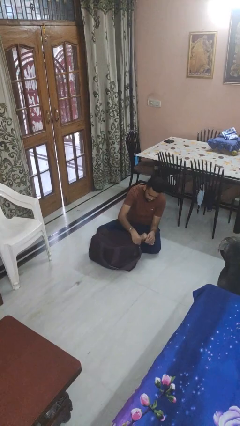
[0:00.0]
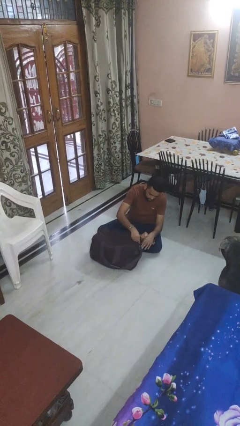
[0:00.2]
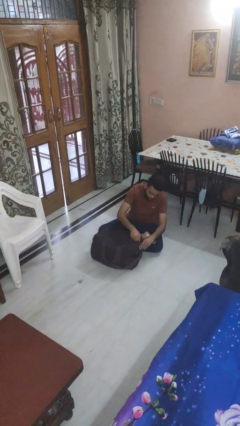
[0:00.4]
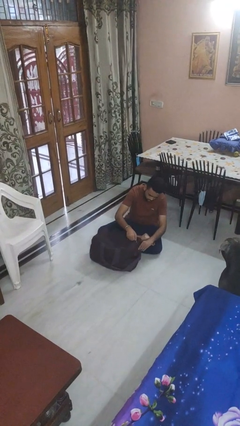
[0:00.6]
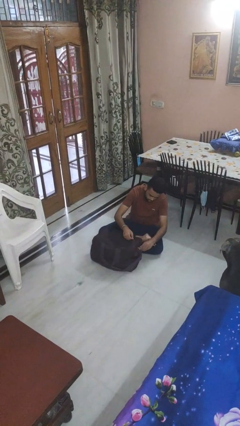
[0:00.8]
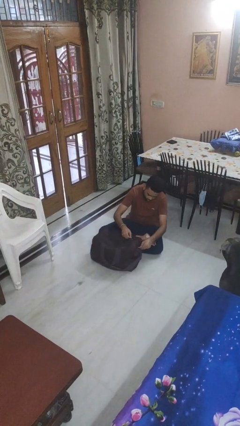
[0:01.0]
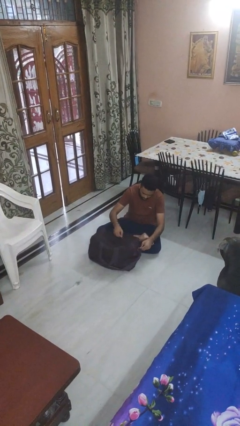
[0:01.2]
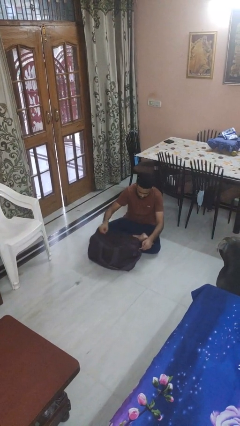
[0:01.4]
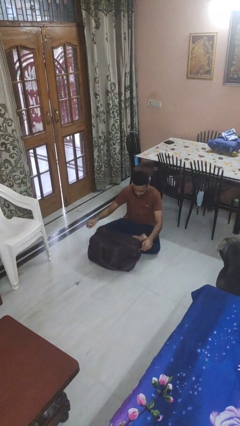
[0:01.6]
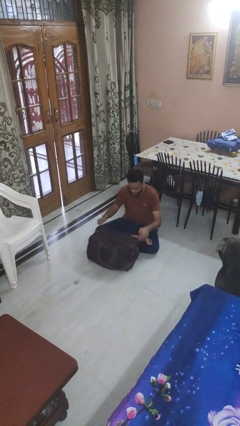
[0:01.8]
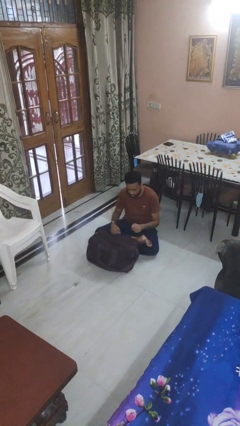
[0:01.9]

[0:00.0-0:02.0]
person opens suitcase

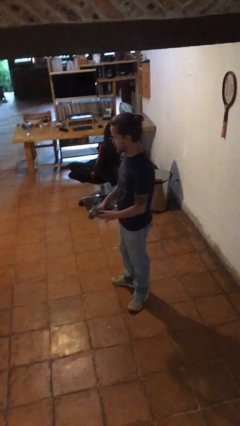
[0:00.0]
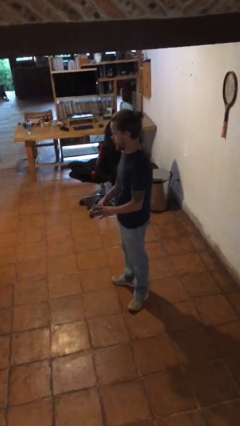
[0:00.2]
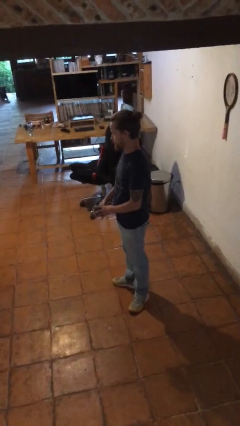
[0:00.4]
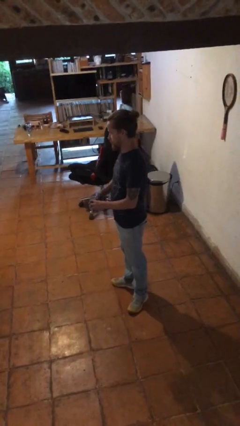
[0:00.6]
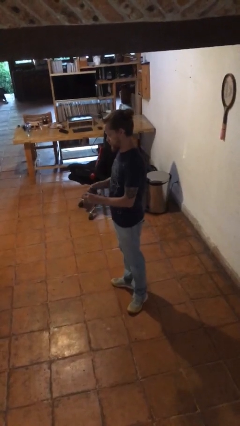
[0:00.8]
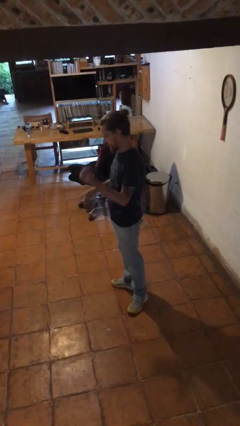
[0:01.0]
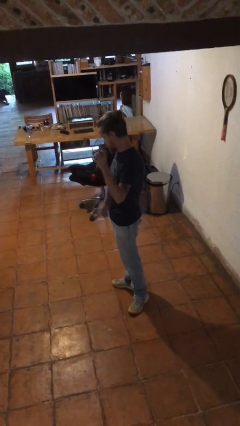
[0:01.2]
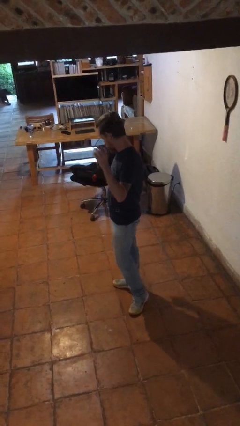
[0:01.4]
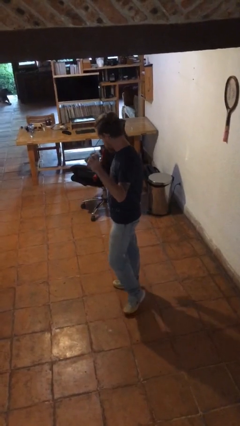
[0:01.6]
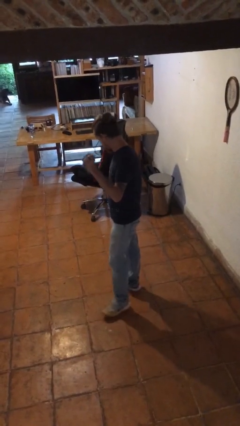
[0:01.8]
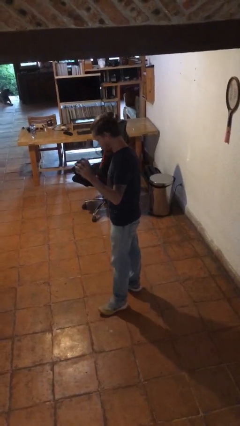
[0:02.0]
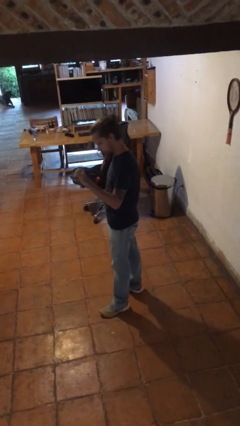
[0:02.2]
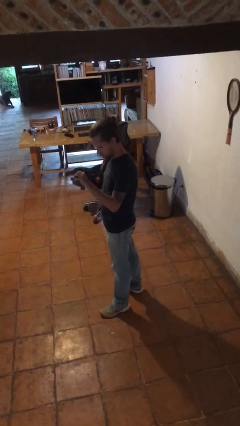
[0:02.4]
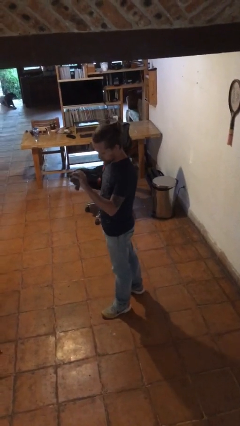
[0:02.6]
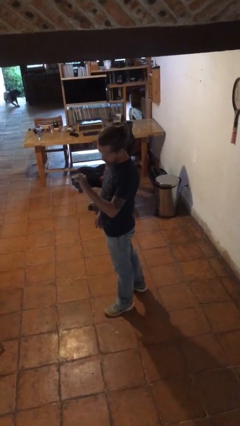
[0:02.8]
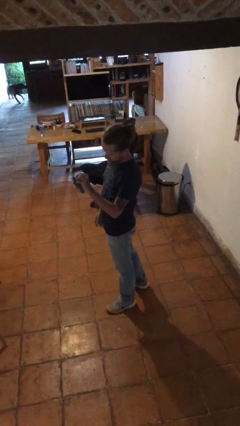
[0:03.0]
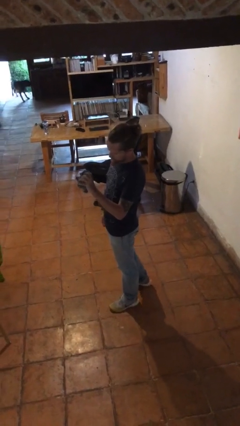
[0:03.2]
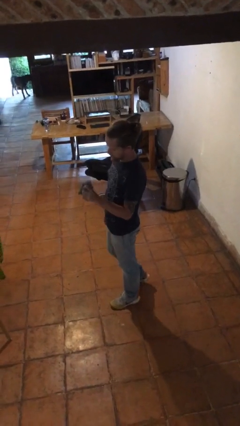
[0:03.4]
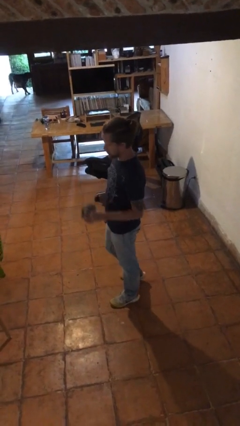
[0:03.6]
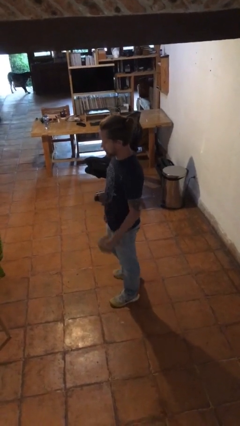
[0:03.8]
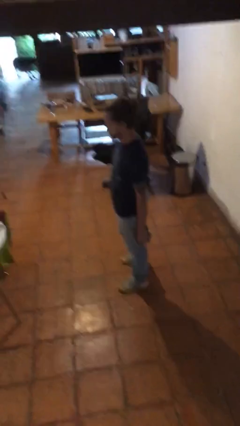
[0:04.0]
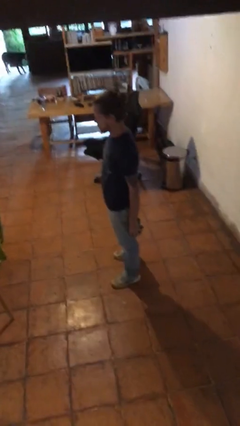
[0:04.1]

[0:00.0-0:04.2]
person squeezes object

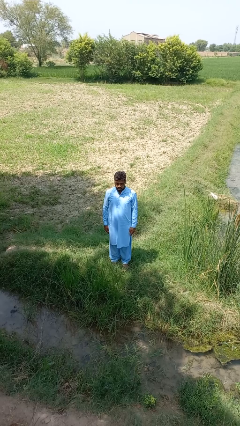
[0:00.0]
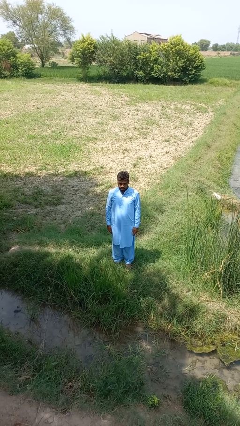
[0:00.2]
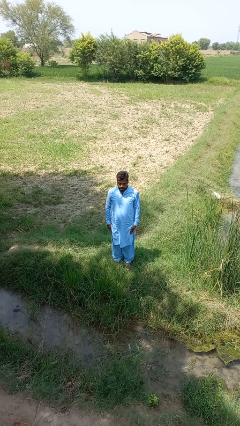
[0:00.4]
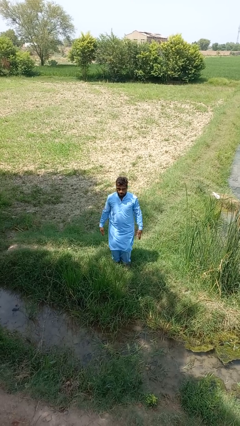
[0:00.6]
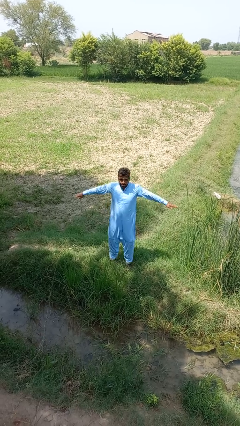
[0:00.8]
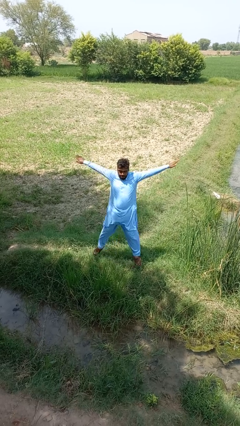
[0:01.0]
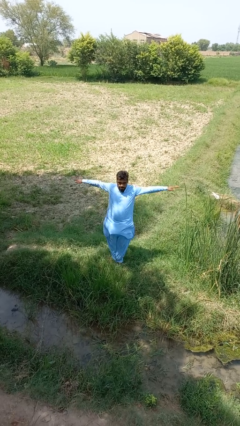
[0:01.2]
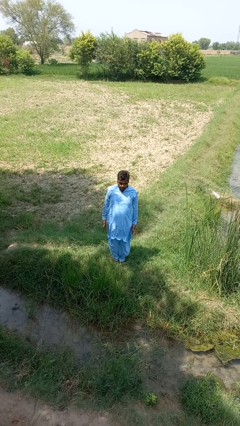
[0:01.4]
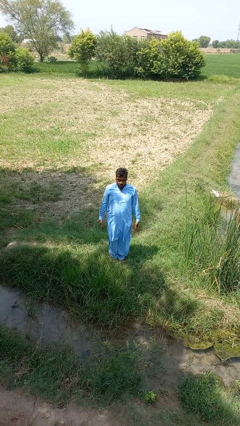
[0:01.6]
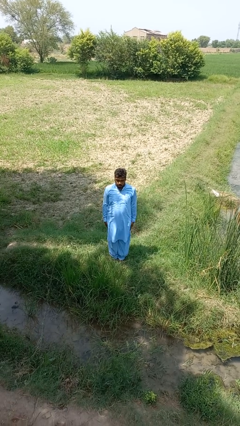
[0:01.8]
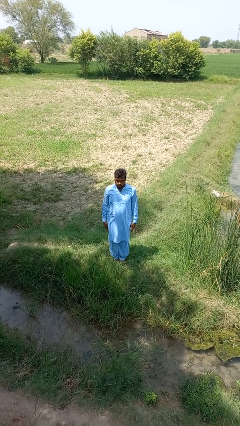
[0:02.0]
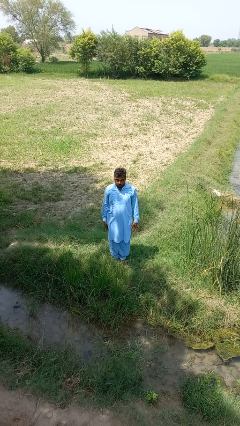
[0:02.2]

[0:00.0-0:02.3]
person exercises with jumping jacks

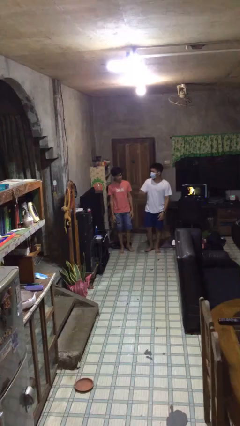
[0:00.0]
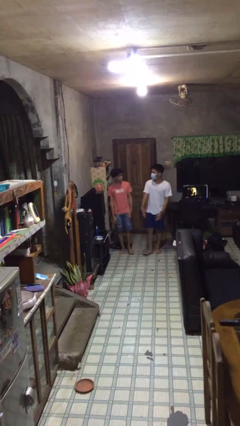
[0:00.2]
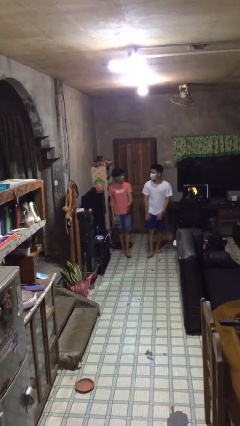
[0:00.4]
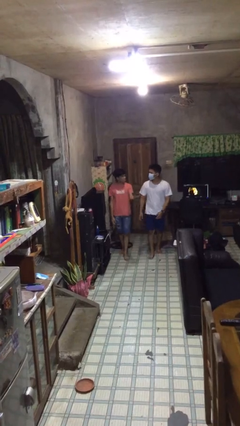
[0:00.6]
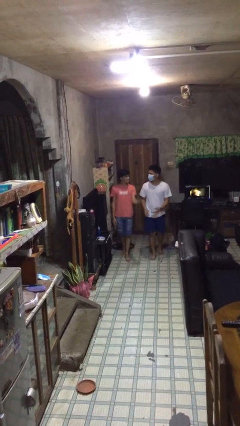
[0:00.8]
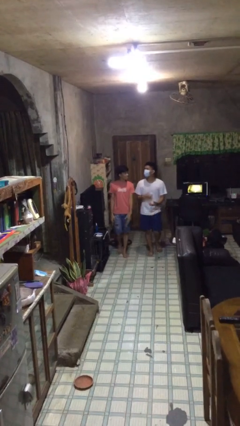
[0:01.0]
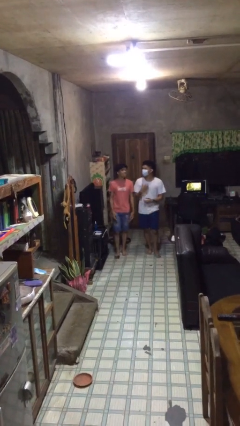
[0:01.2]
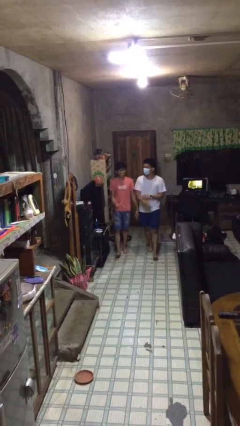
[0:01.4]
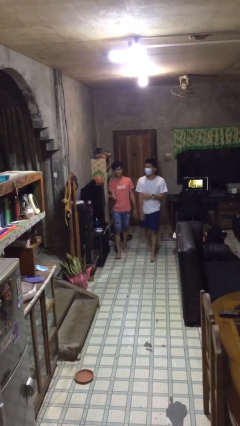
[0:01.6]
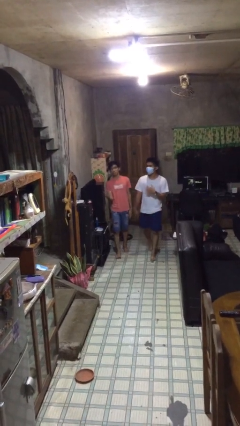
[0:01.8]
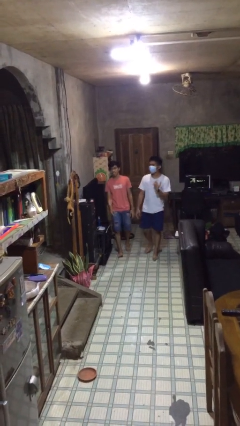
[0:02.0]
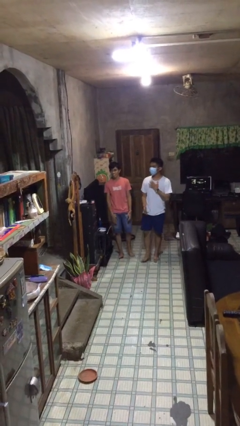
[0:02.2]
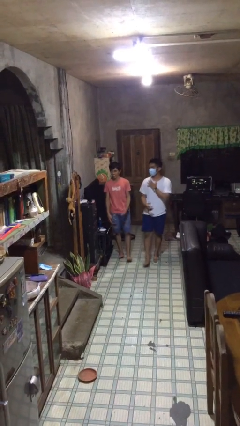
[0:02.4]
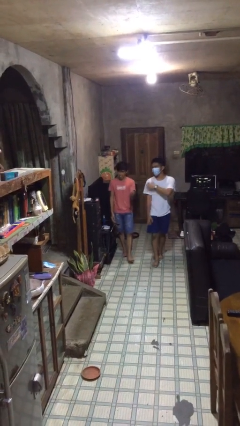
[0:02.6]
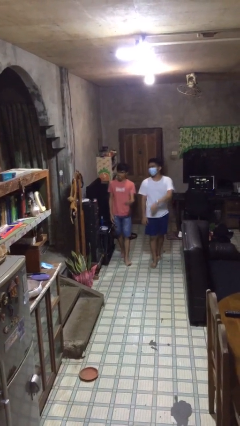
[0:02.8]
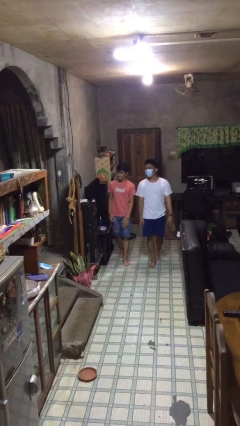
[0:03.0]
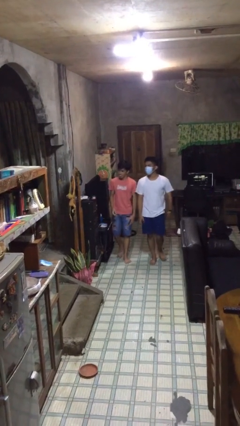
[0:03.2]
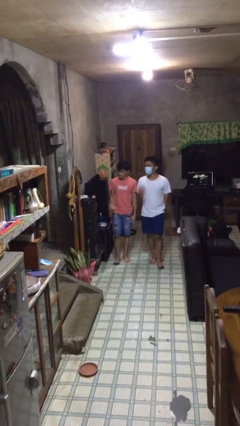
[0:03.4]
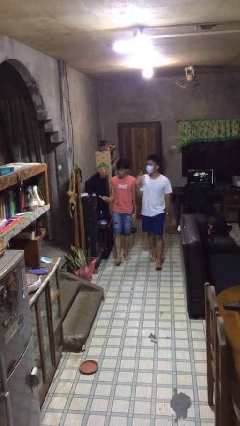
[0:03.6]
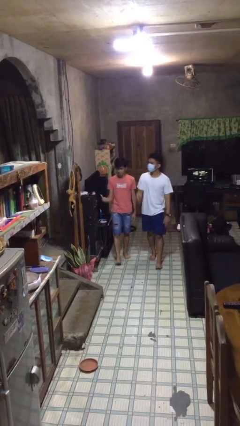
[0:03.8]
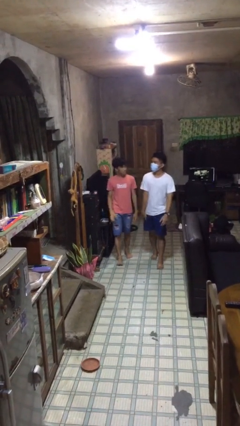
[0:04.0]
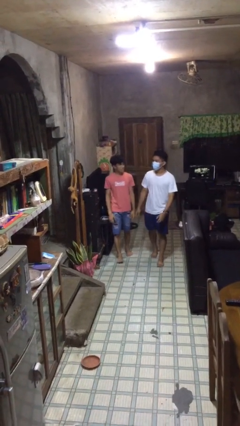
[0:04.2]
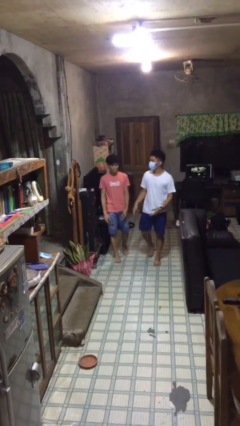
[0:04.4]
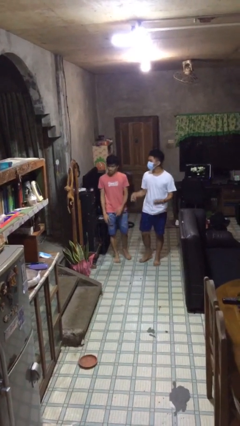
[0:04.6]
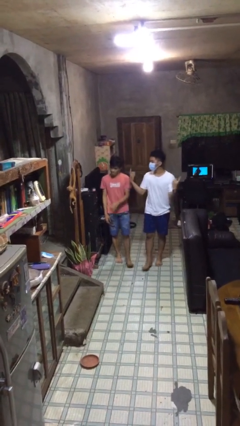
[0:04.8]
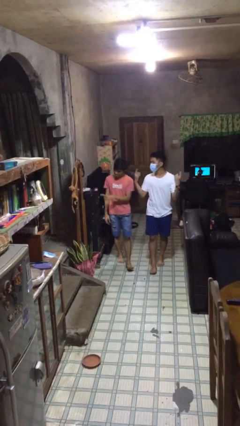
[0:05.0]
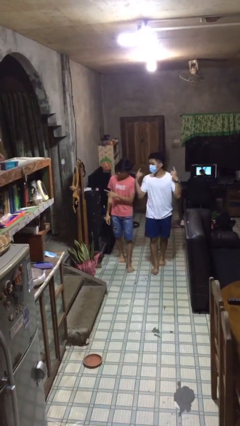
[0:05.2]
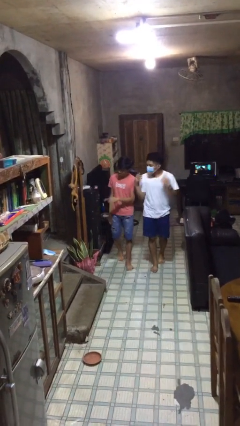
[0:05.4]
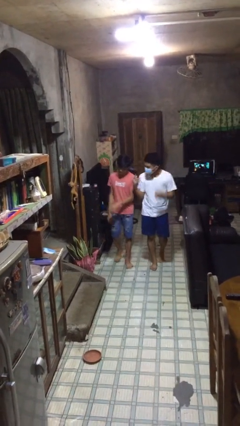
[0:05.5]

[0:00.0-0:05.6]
person talks to person

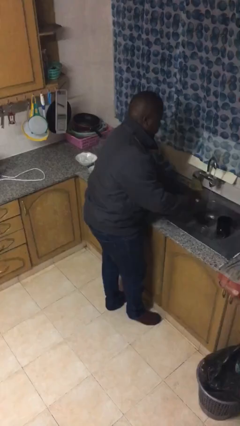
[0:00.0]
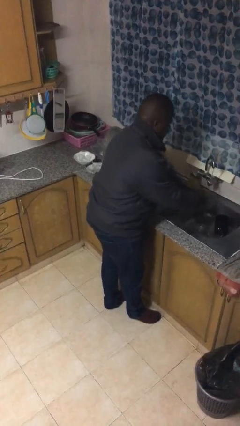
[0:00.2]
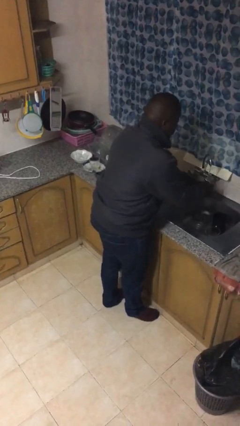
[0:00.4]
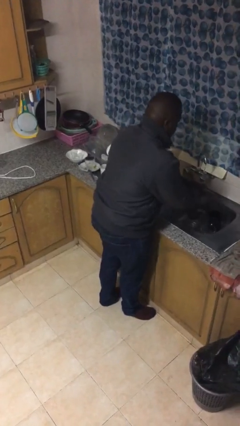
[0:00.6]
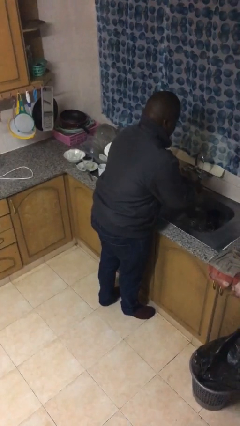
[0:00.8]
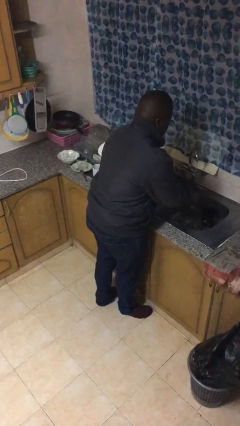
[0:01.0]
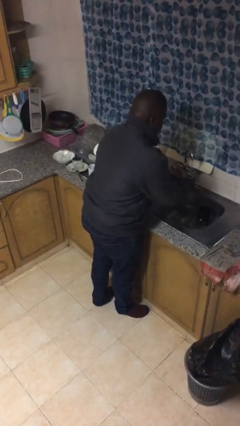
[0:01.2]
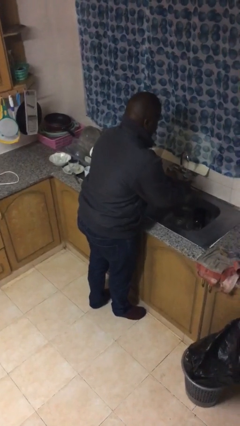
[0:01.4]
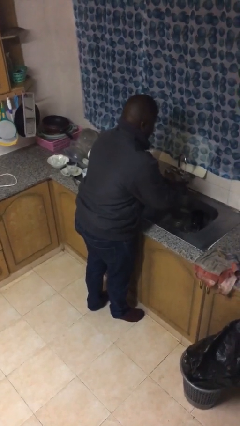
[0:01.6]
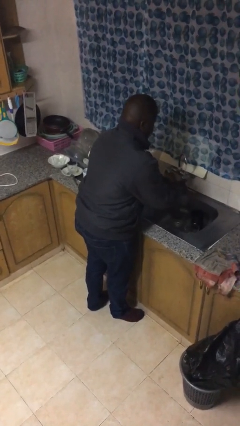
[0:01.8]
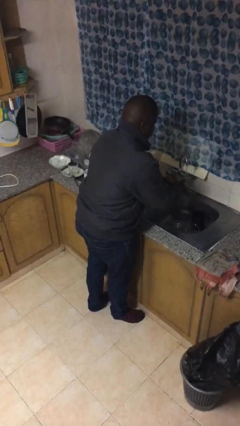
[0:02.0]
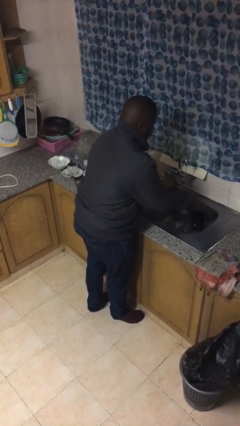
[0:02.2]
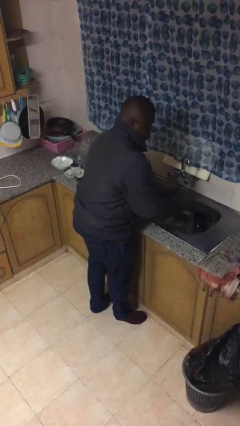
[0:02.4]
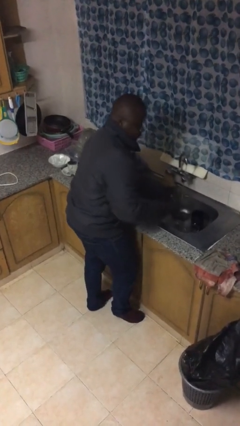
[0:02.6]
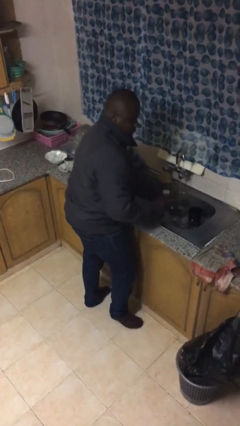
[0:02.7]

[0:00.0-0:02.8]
person washes hands

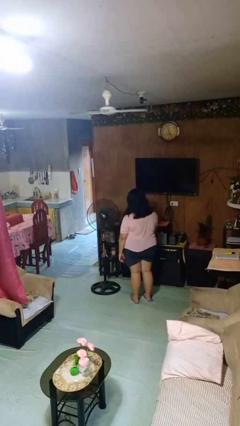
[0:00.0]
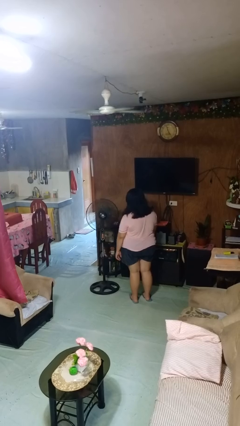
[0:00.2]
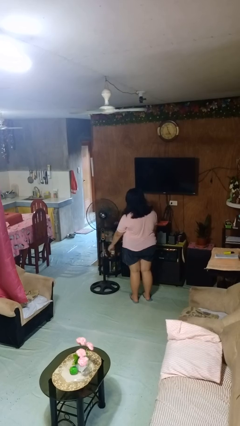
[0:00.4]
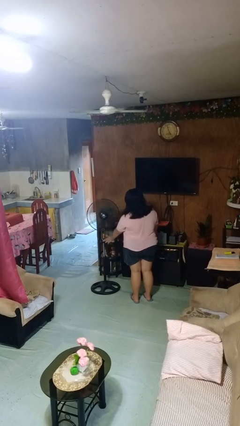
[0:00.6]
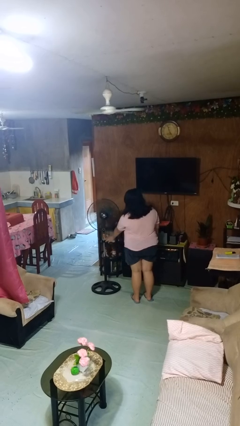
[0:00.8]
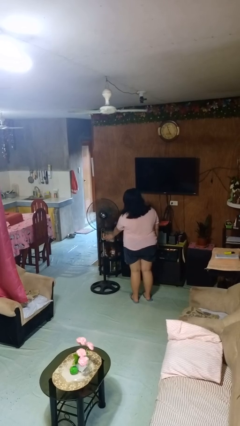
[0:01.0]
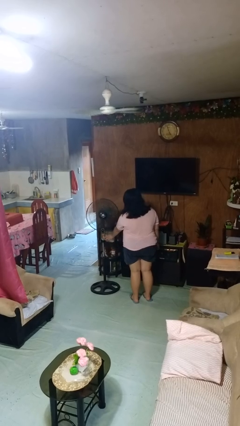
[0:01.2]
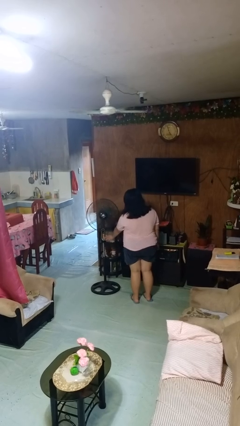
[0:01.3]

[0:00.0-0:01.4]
person turns off fan
